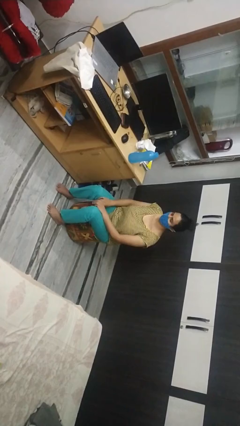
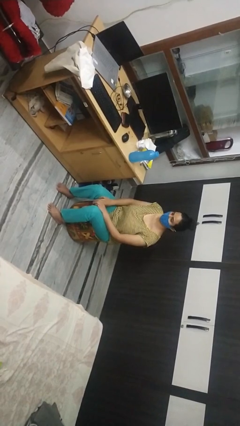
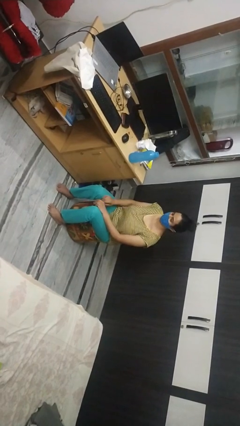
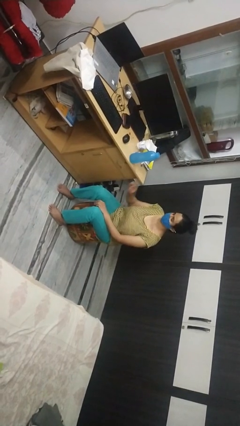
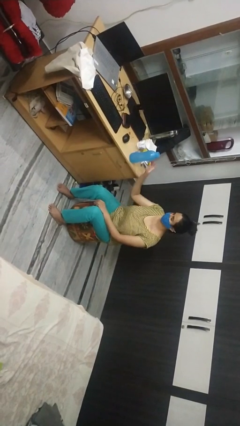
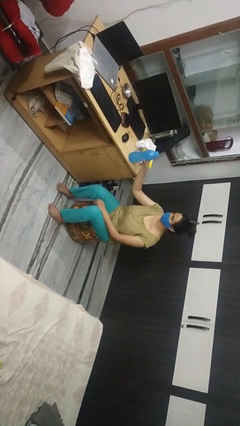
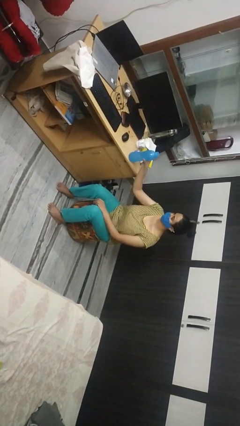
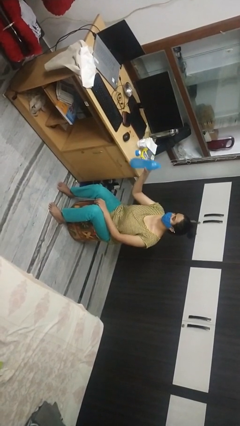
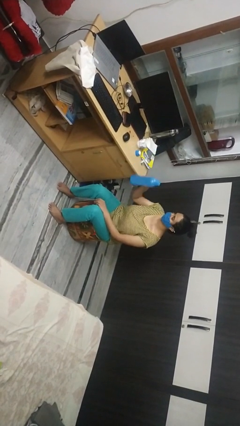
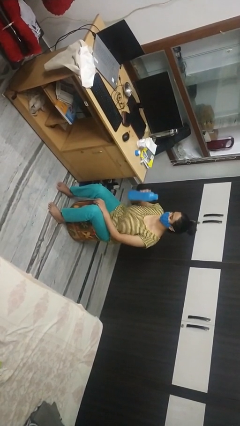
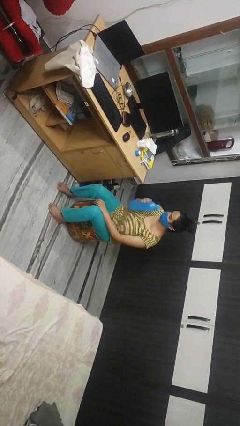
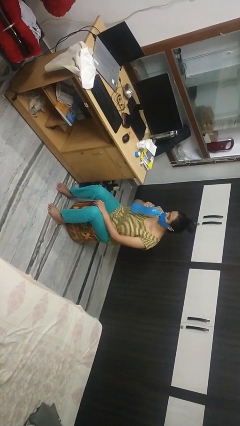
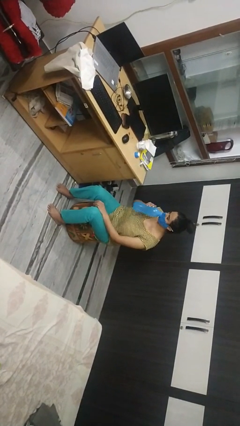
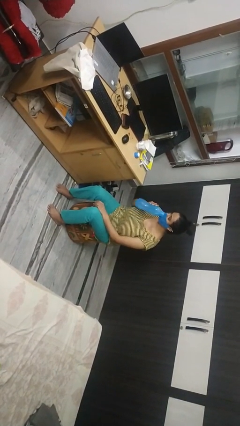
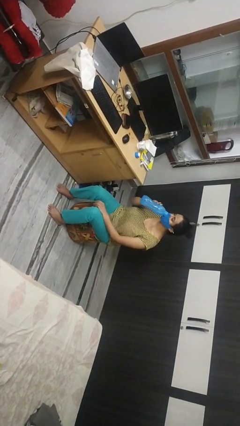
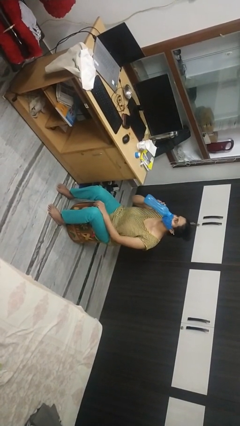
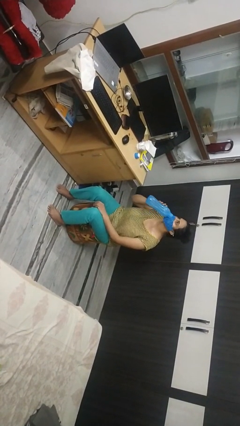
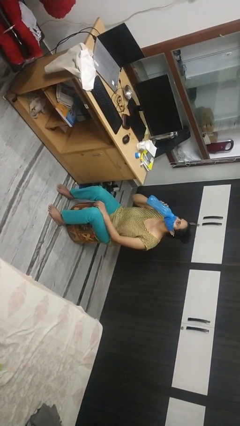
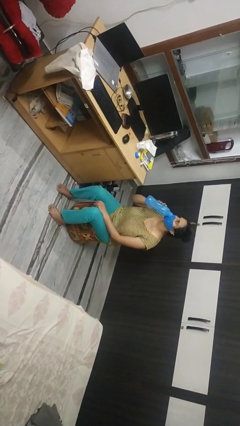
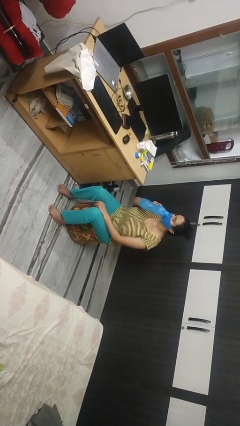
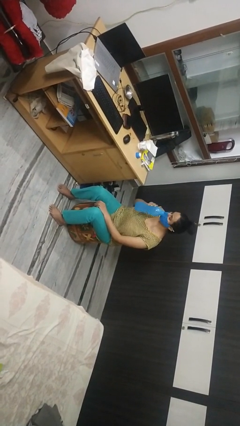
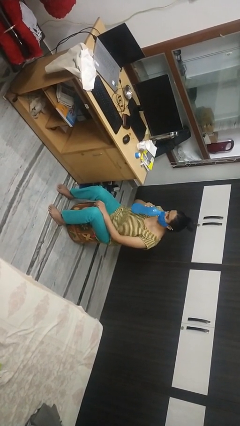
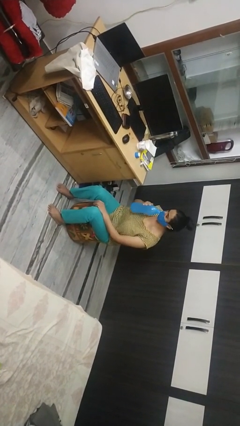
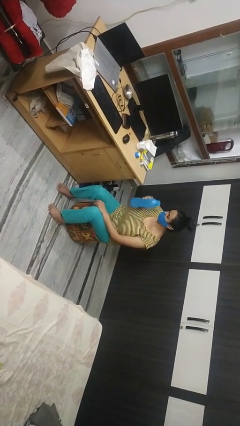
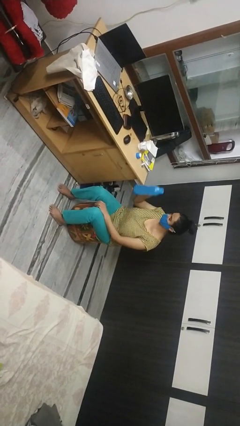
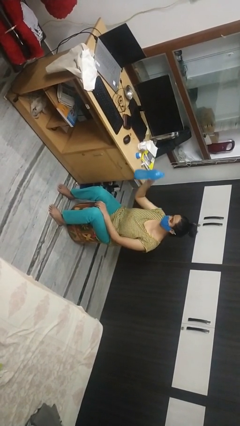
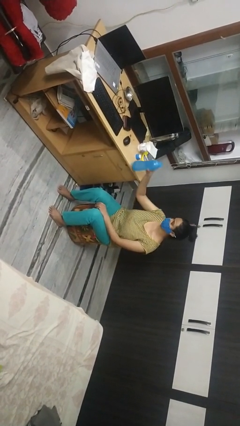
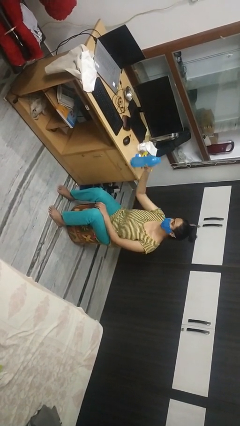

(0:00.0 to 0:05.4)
person drinks from bottle

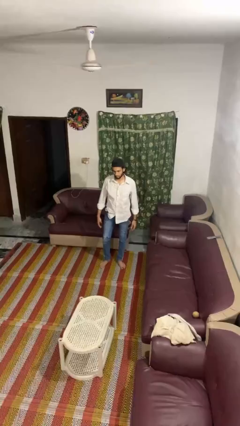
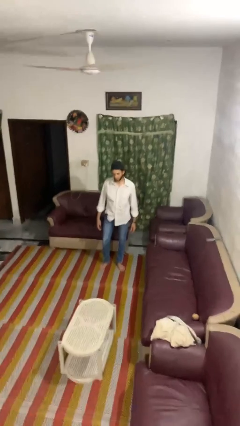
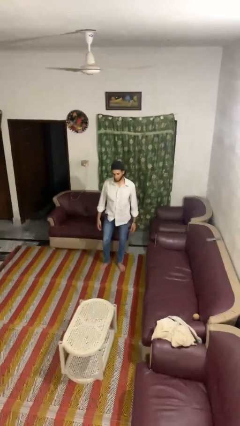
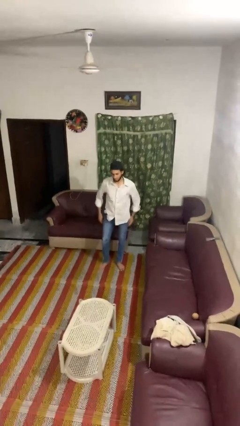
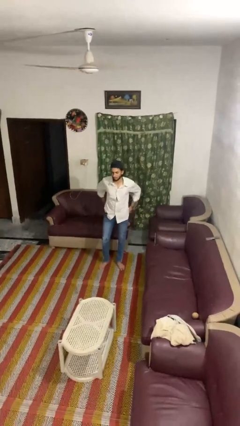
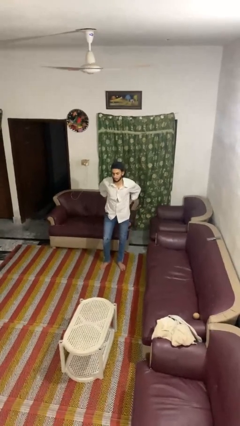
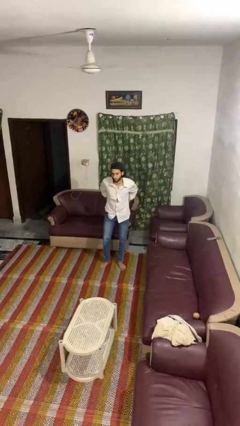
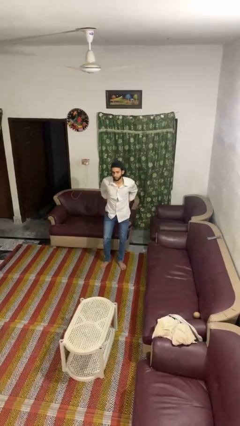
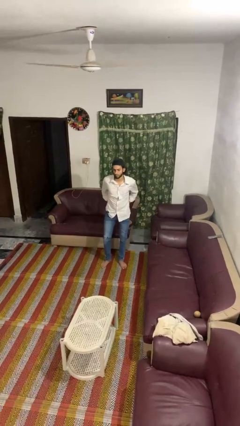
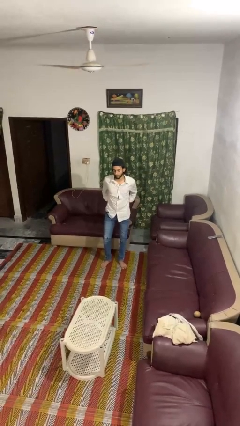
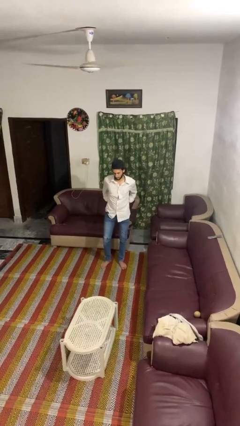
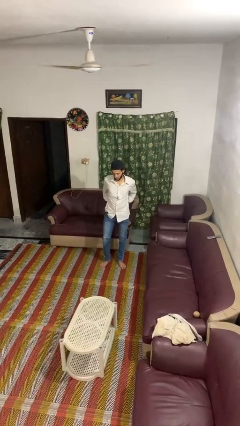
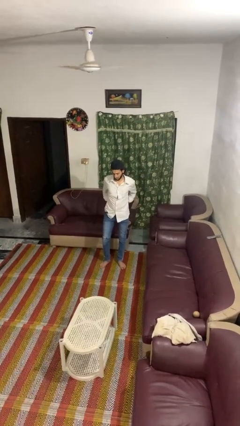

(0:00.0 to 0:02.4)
person puts hands in back pockets

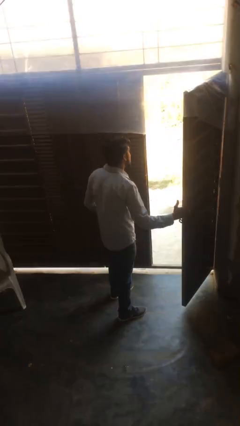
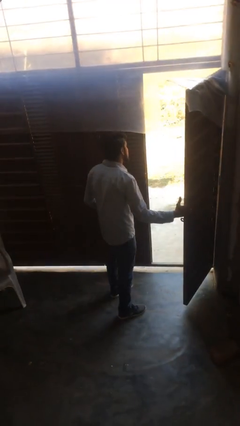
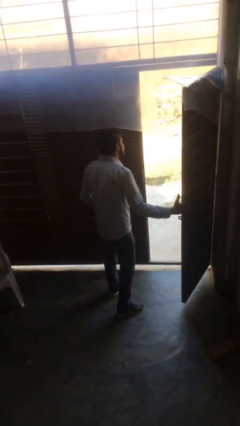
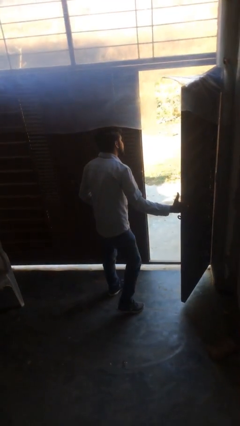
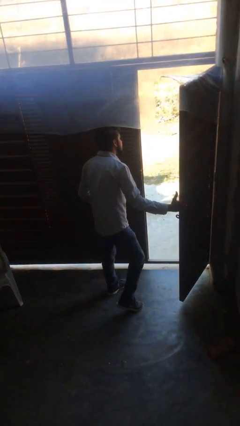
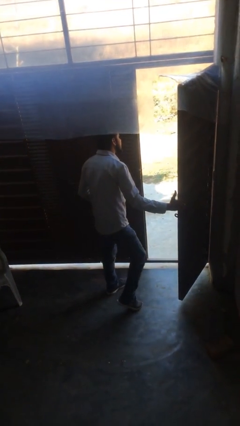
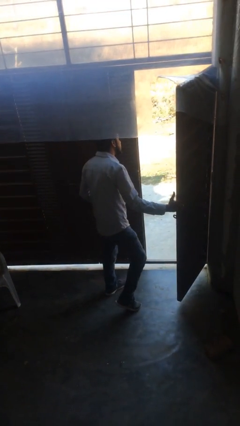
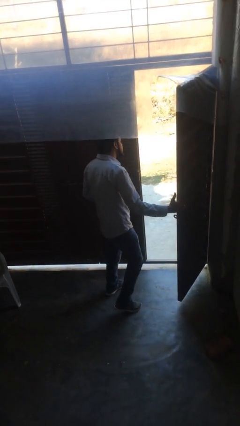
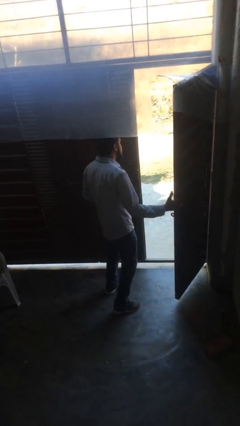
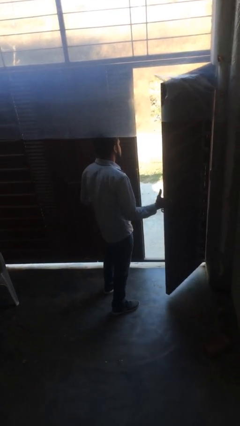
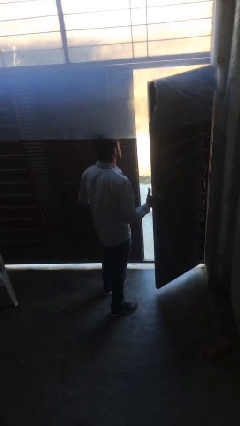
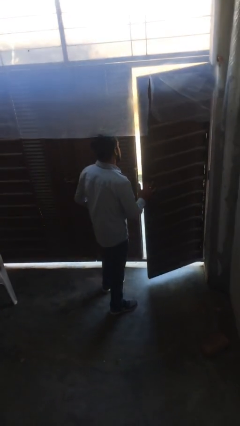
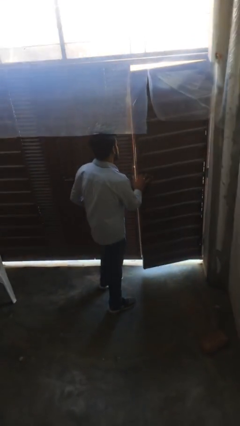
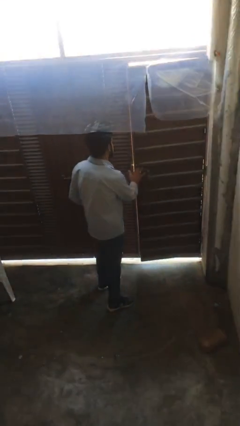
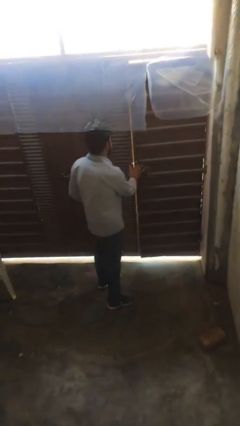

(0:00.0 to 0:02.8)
person opens facility door

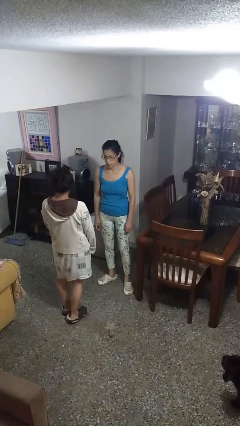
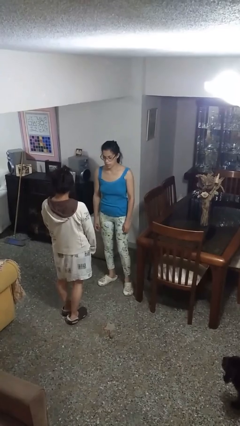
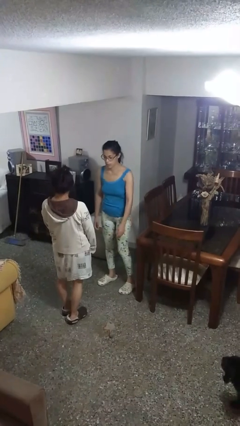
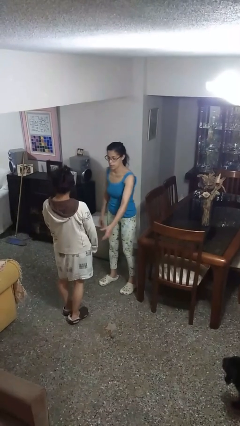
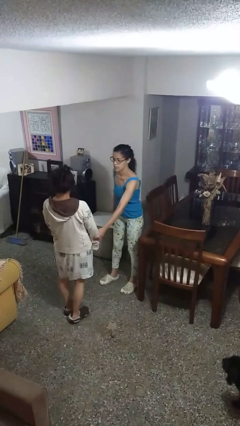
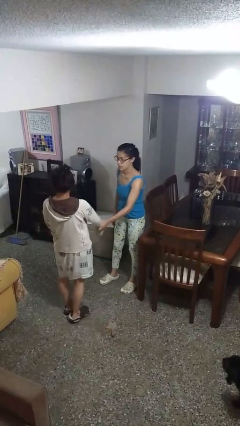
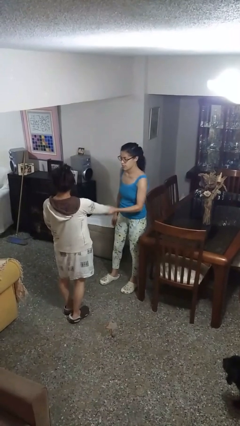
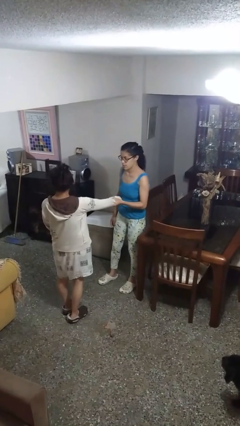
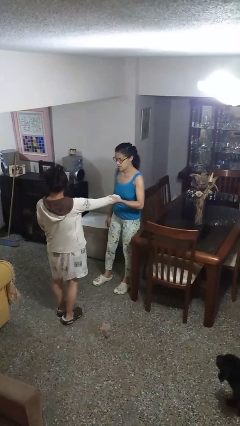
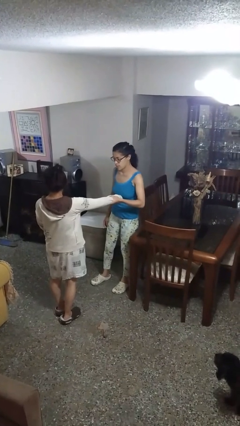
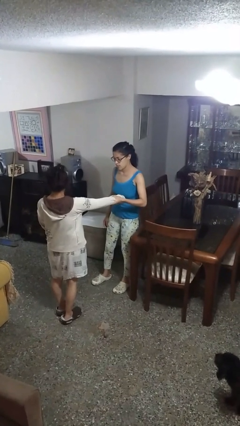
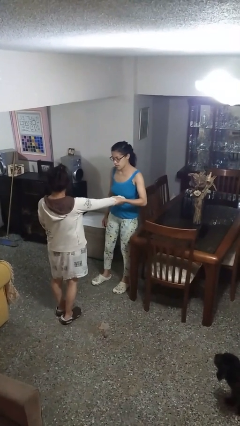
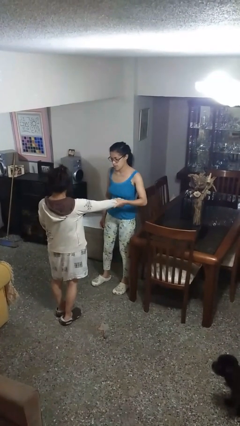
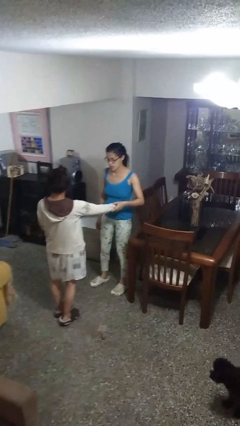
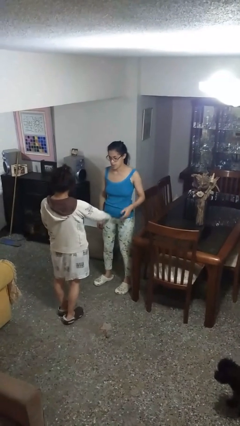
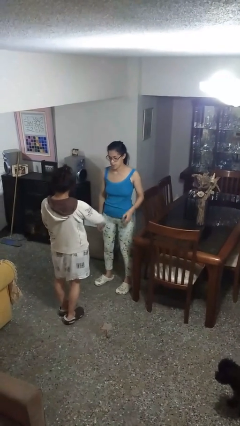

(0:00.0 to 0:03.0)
person grabs person by forearm

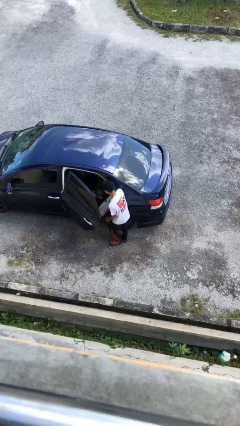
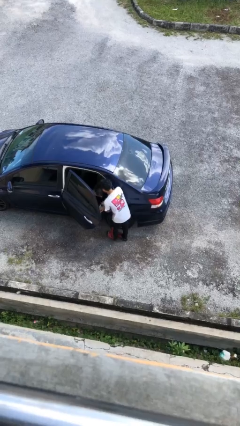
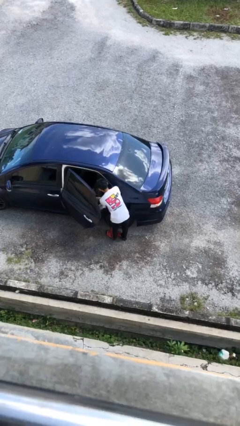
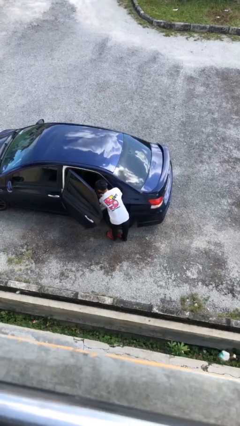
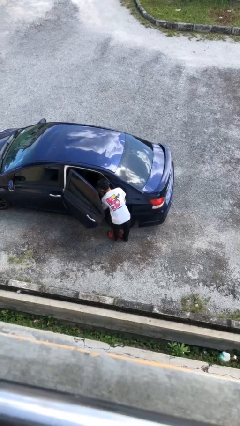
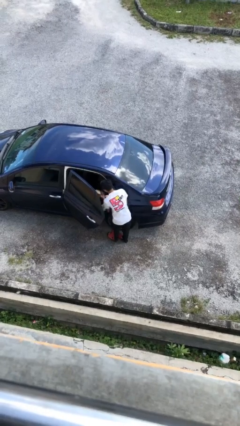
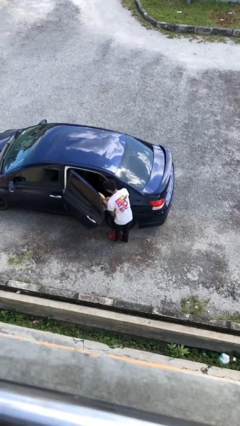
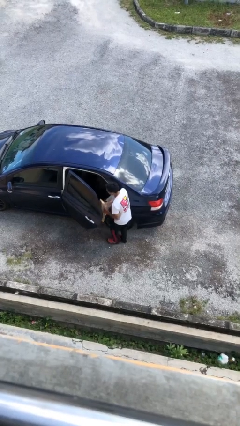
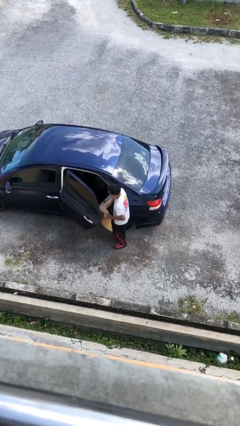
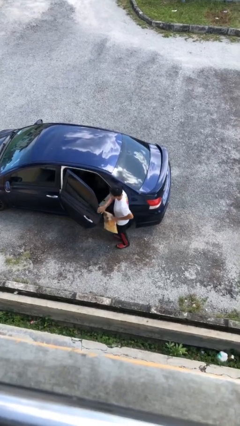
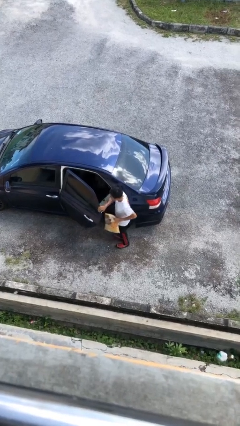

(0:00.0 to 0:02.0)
person unloads car

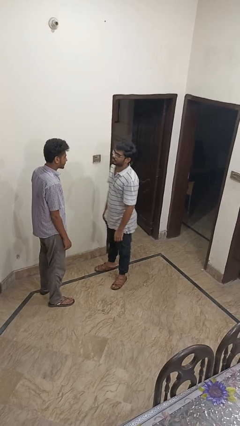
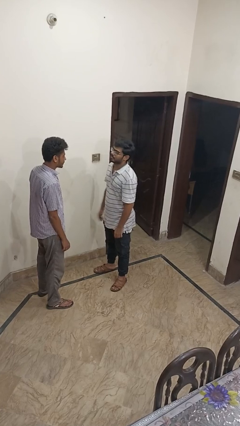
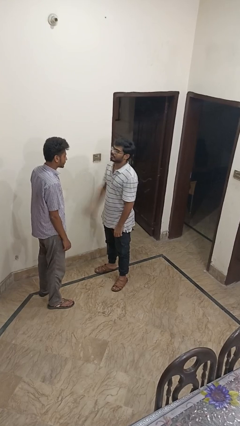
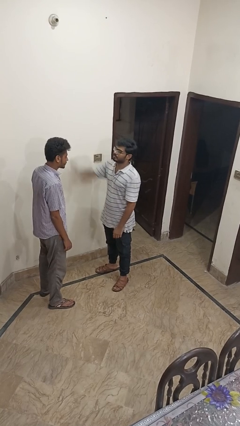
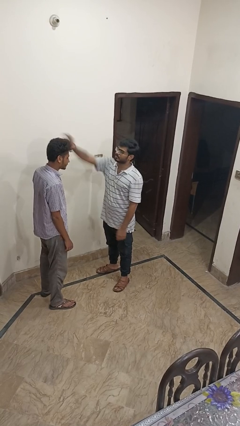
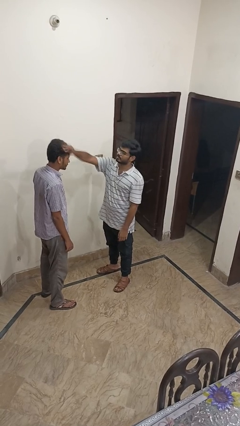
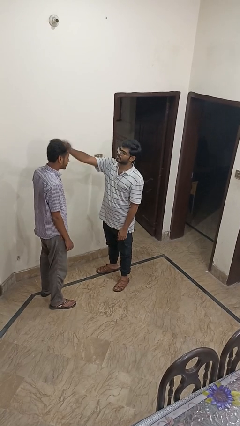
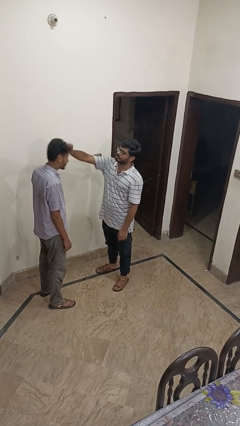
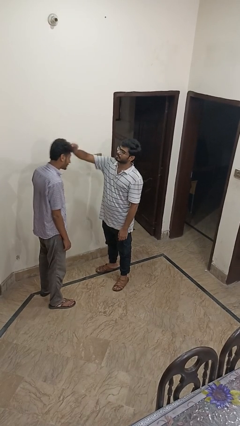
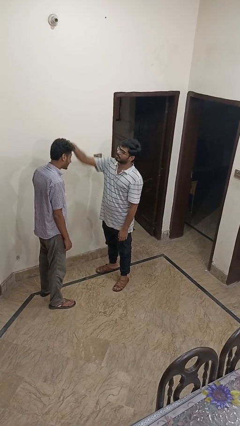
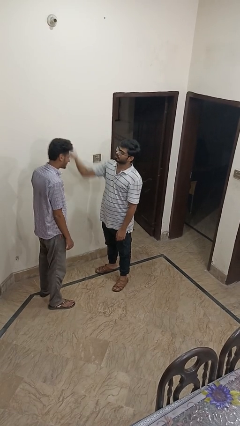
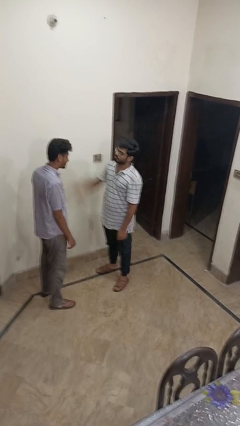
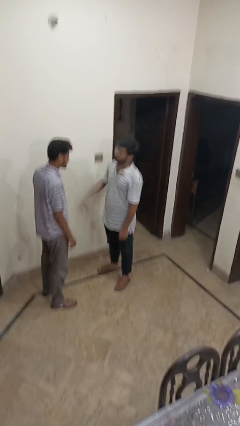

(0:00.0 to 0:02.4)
person grabs person by hair
